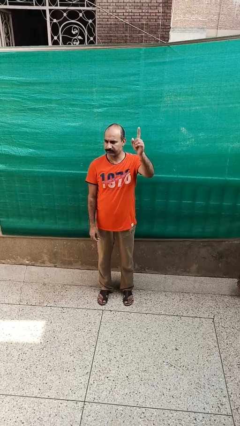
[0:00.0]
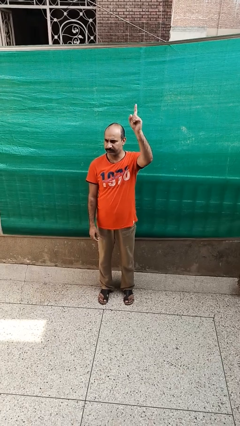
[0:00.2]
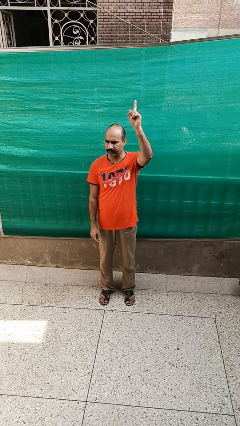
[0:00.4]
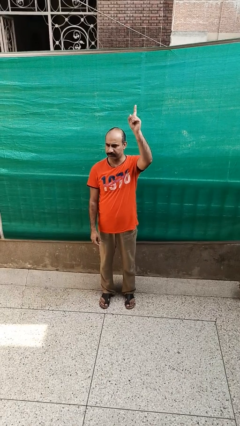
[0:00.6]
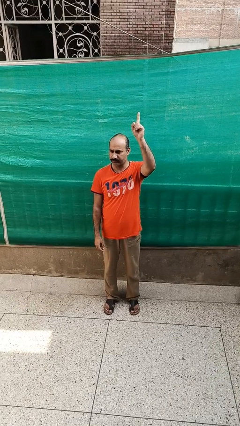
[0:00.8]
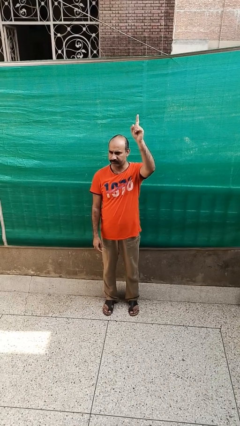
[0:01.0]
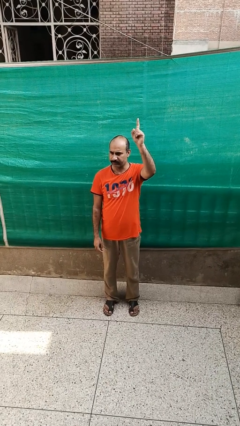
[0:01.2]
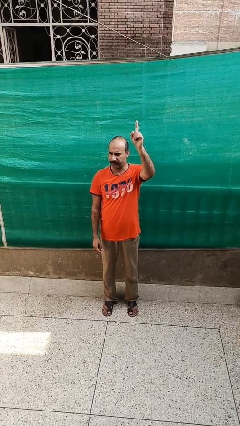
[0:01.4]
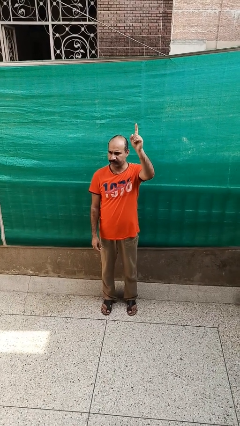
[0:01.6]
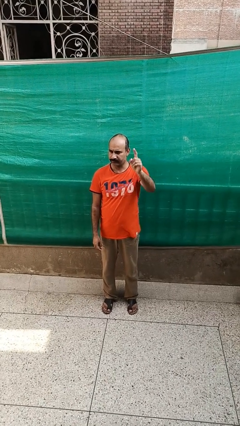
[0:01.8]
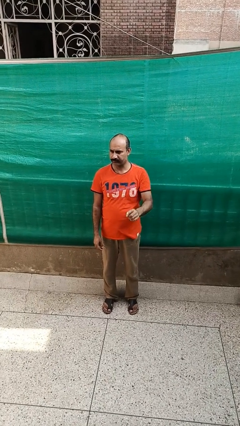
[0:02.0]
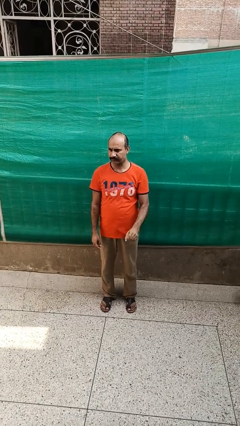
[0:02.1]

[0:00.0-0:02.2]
person gestures raise hand

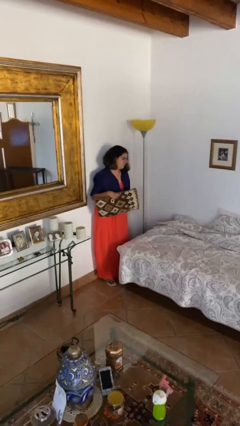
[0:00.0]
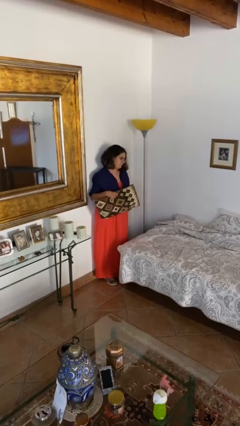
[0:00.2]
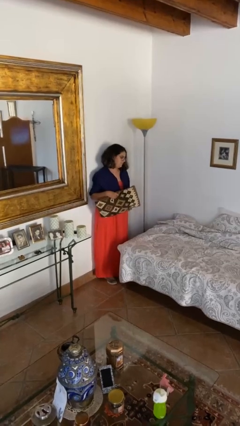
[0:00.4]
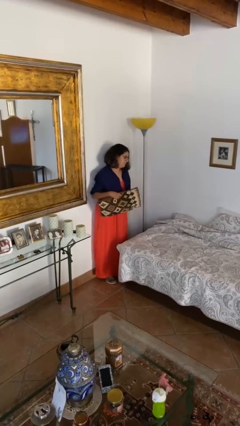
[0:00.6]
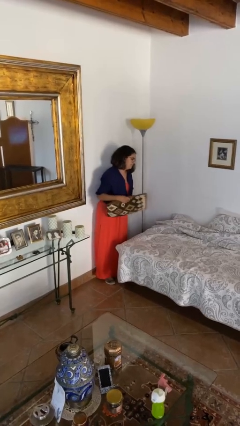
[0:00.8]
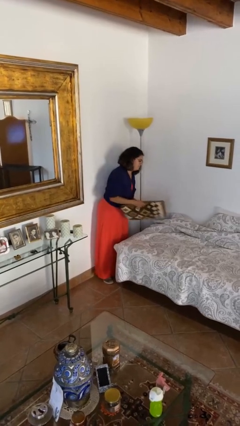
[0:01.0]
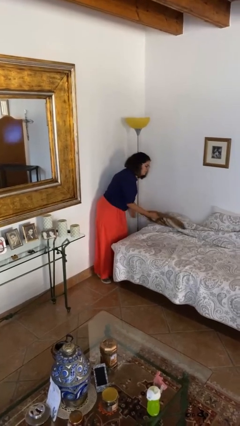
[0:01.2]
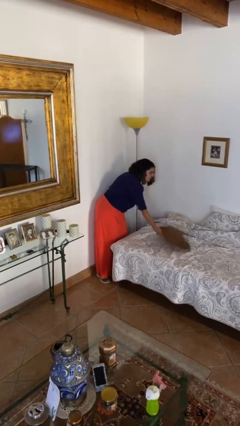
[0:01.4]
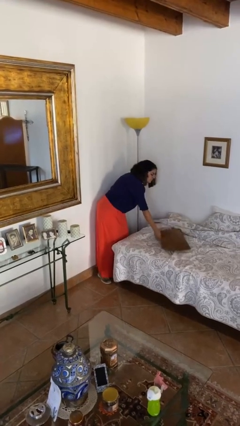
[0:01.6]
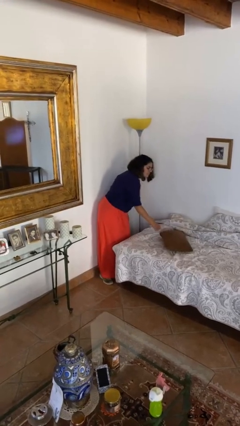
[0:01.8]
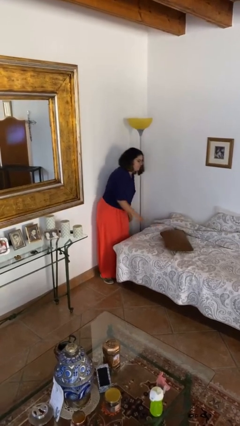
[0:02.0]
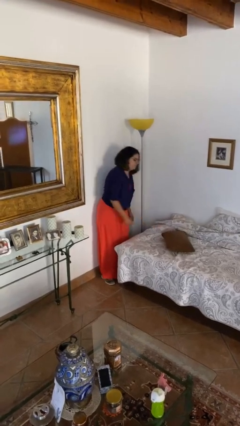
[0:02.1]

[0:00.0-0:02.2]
person puts down object on bed

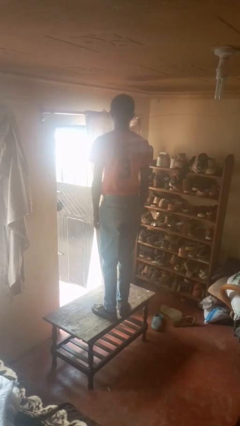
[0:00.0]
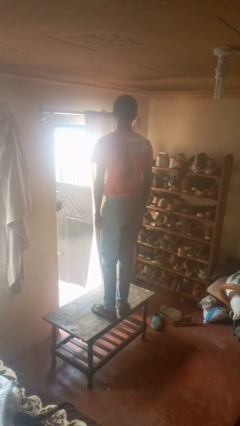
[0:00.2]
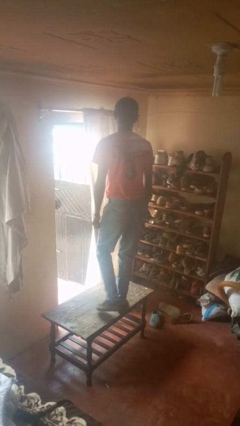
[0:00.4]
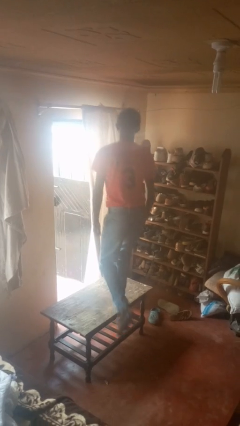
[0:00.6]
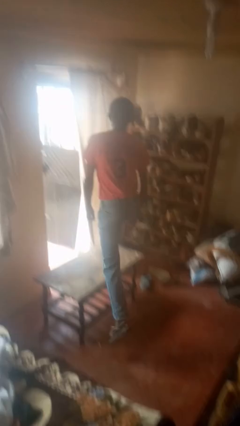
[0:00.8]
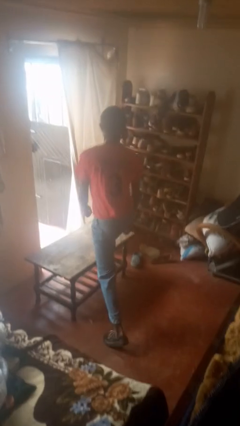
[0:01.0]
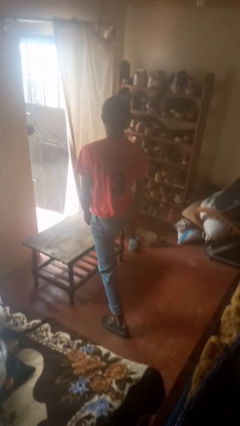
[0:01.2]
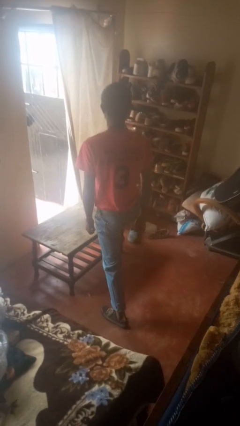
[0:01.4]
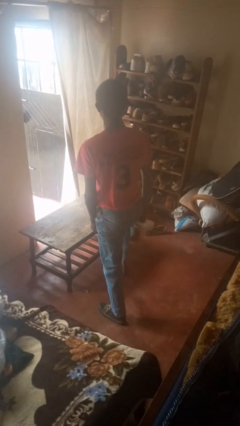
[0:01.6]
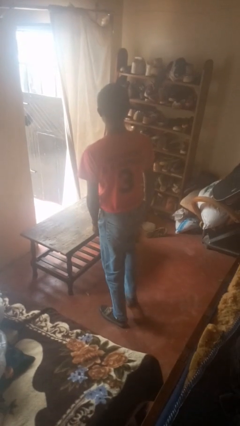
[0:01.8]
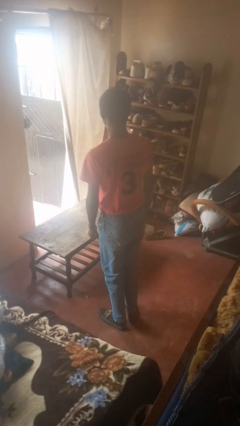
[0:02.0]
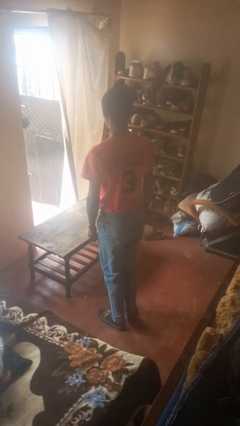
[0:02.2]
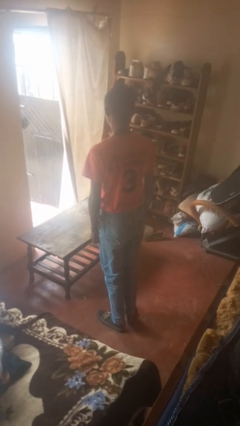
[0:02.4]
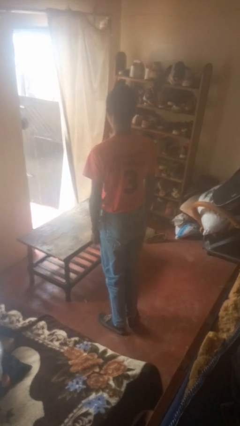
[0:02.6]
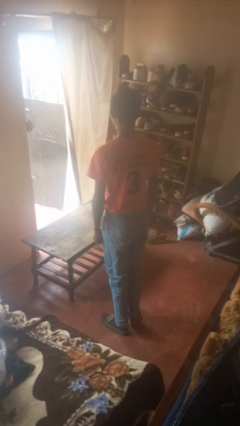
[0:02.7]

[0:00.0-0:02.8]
person climbs off table

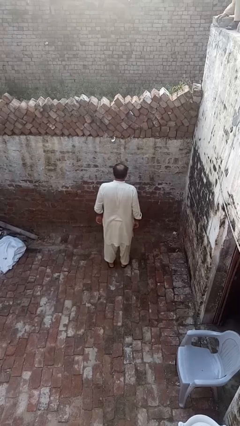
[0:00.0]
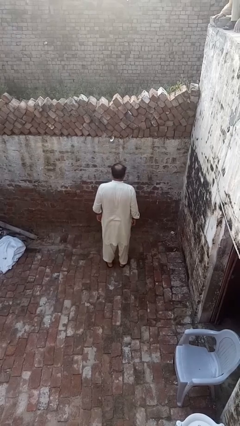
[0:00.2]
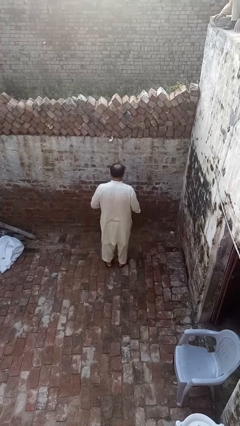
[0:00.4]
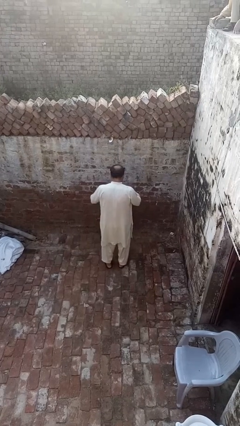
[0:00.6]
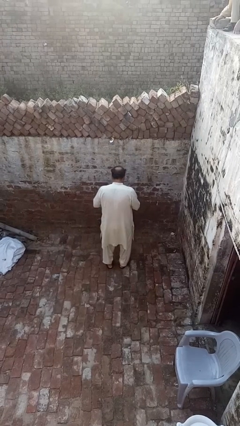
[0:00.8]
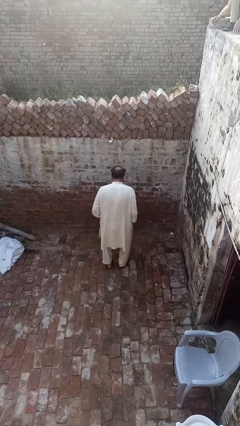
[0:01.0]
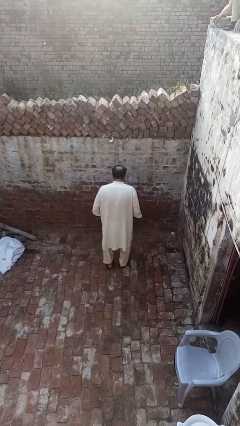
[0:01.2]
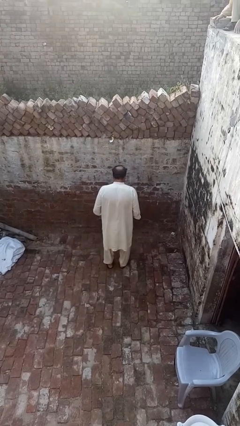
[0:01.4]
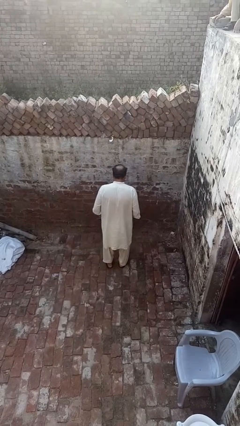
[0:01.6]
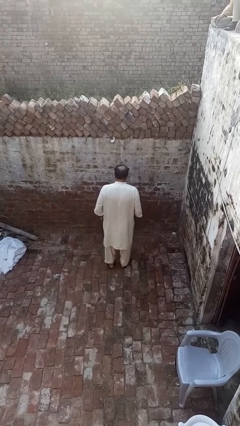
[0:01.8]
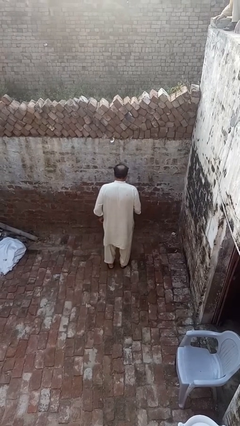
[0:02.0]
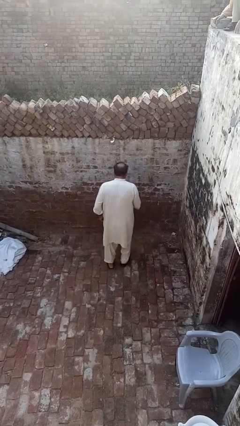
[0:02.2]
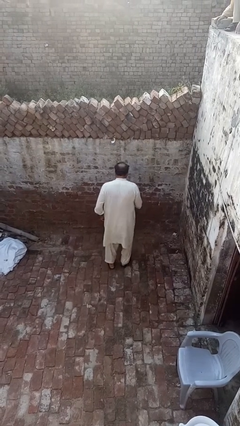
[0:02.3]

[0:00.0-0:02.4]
person slaps hands on thighs

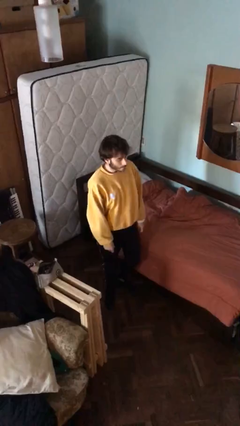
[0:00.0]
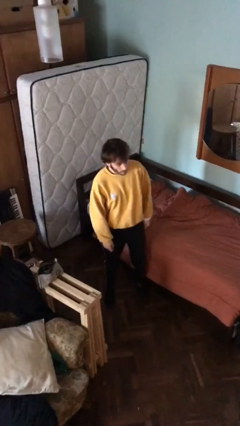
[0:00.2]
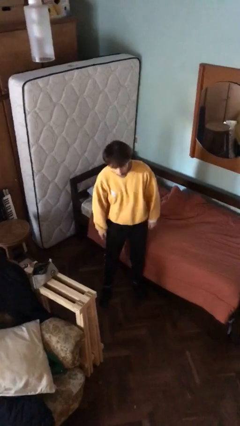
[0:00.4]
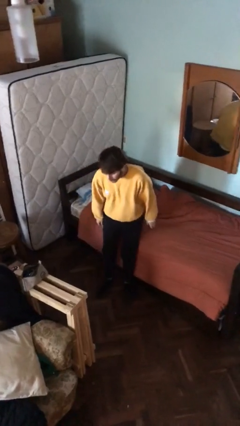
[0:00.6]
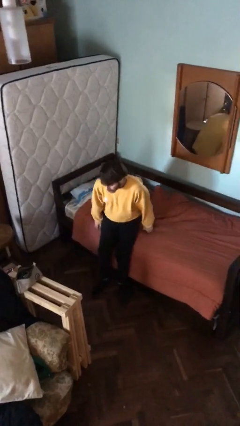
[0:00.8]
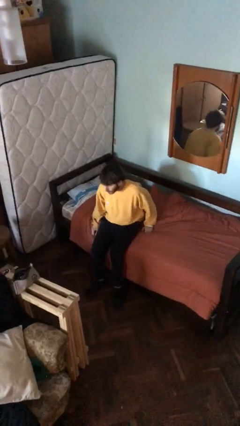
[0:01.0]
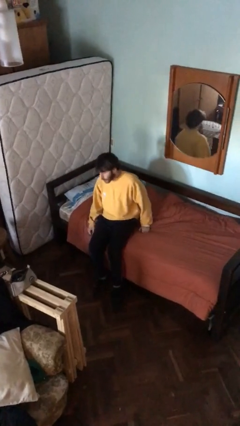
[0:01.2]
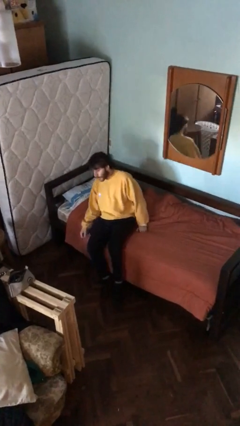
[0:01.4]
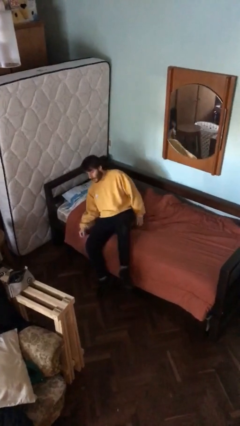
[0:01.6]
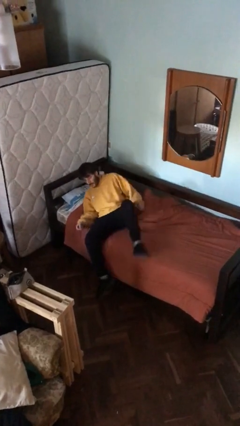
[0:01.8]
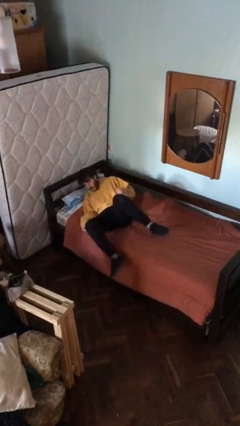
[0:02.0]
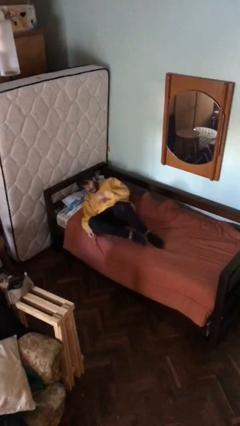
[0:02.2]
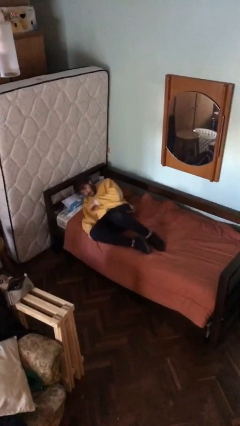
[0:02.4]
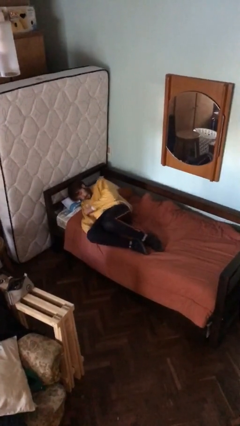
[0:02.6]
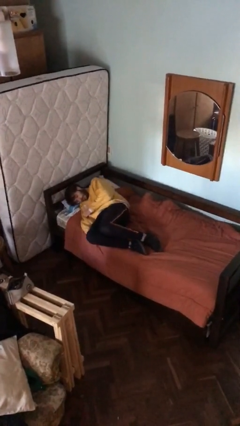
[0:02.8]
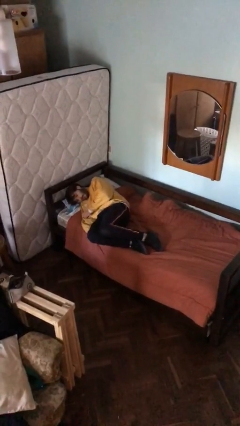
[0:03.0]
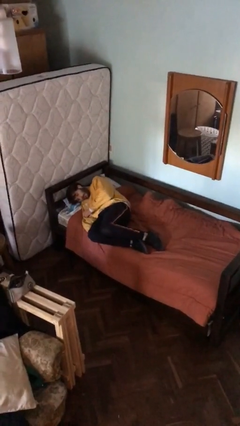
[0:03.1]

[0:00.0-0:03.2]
person lies down on bed

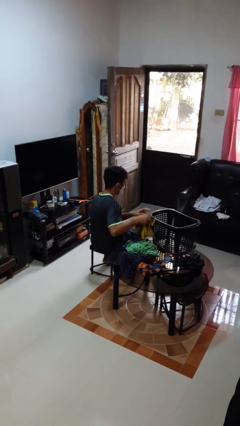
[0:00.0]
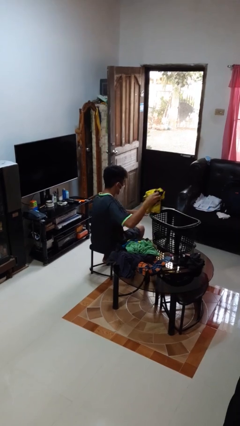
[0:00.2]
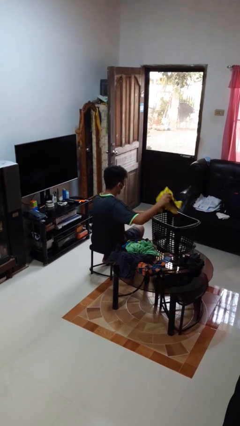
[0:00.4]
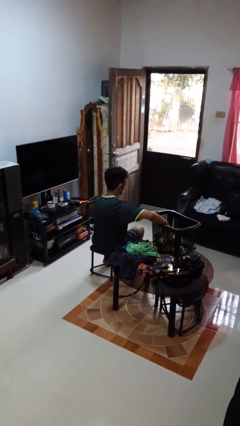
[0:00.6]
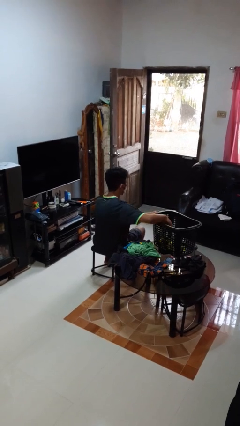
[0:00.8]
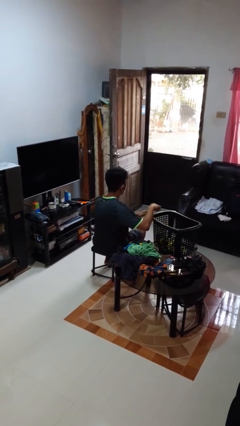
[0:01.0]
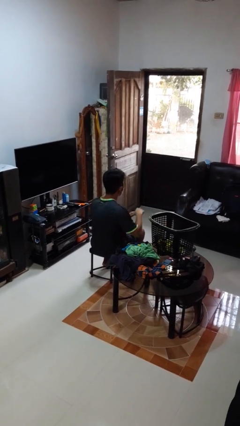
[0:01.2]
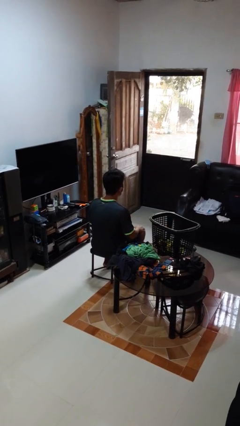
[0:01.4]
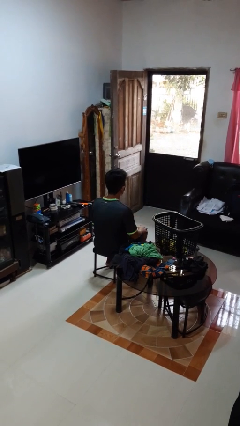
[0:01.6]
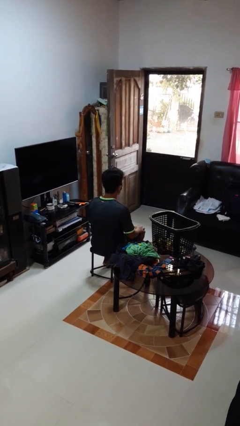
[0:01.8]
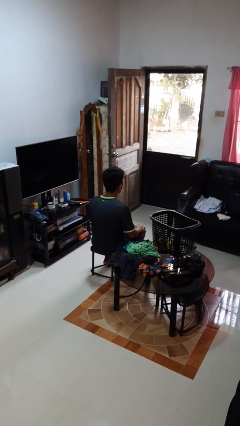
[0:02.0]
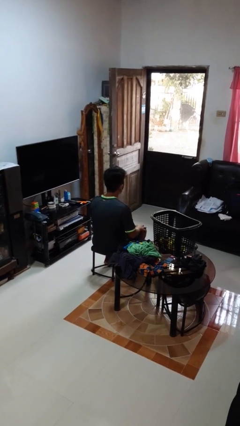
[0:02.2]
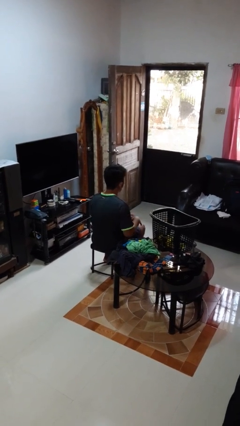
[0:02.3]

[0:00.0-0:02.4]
person puts object into basket

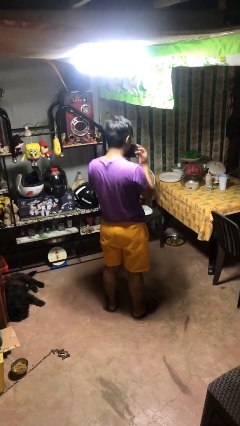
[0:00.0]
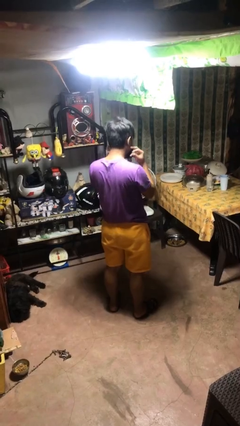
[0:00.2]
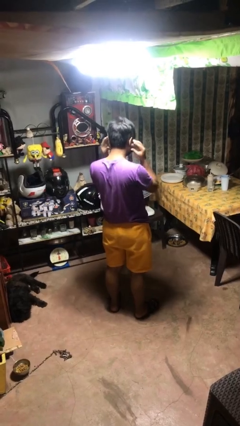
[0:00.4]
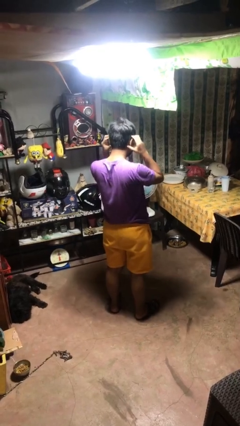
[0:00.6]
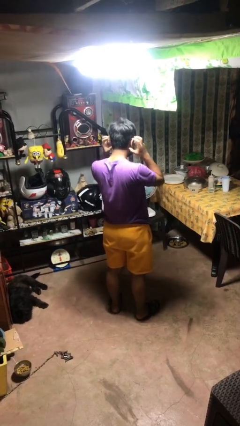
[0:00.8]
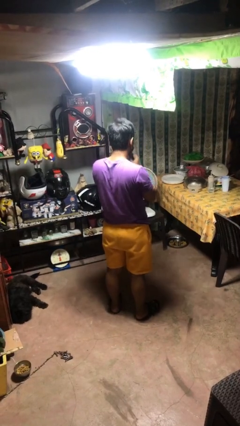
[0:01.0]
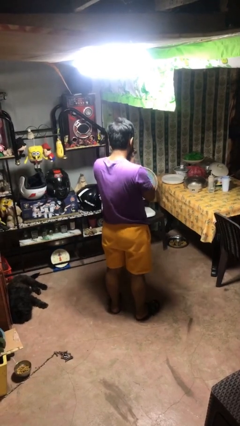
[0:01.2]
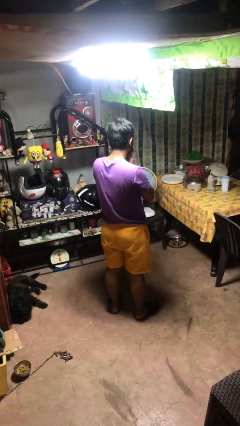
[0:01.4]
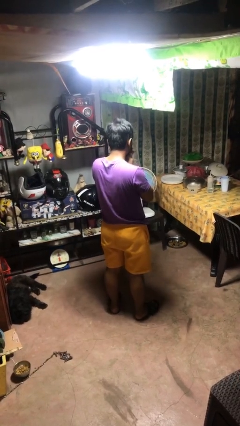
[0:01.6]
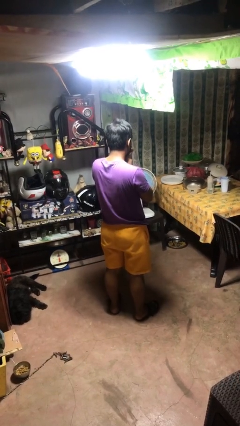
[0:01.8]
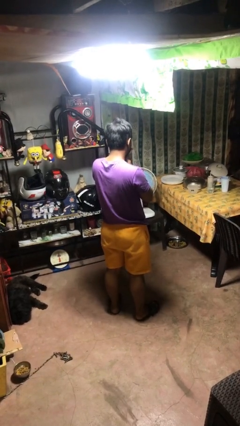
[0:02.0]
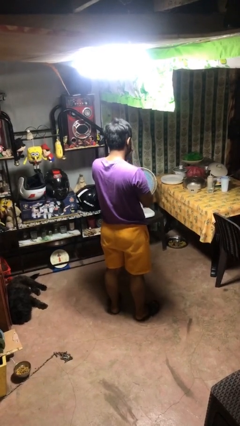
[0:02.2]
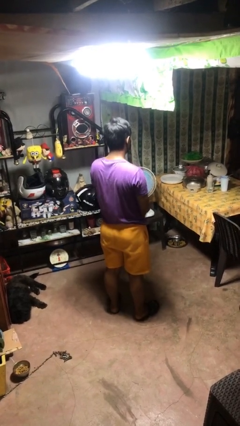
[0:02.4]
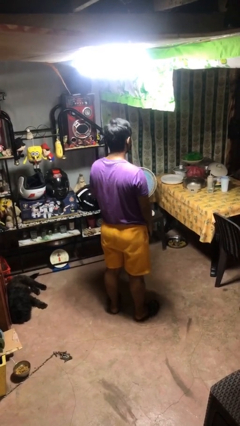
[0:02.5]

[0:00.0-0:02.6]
person puts on facemask
